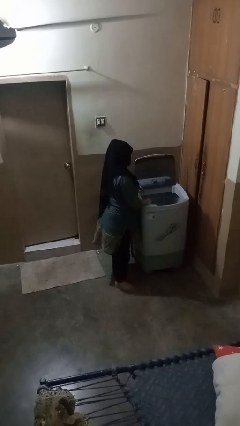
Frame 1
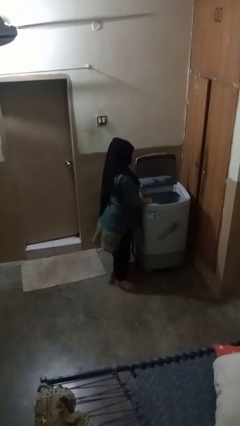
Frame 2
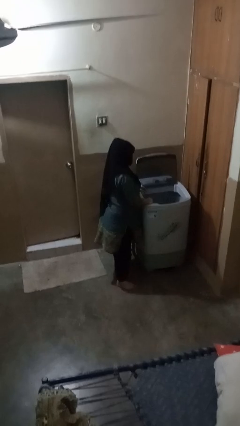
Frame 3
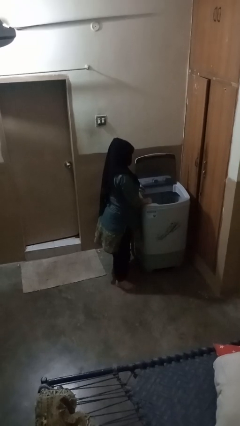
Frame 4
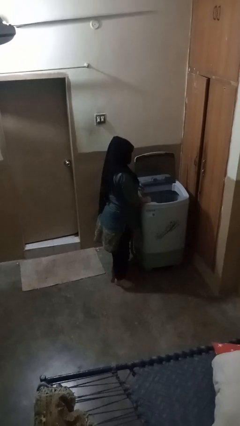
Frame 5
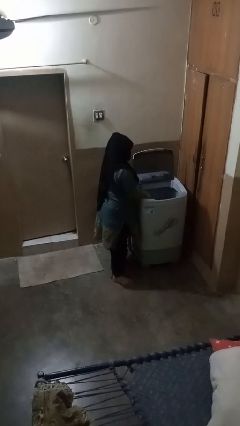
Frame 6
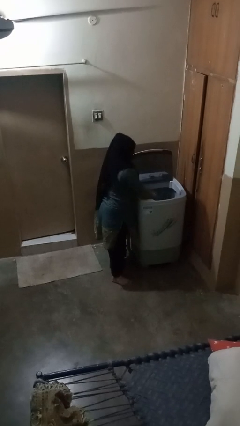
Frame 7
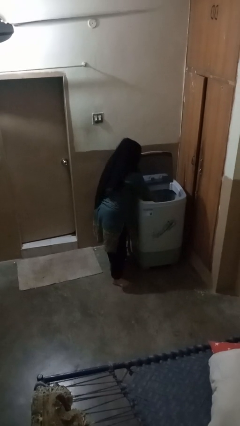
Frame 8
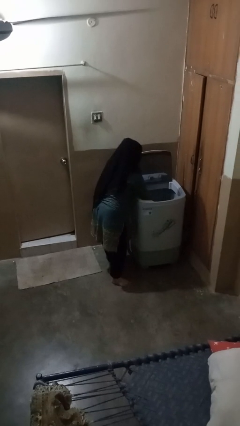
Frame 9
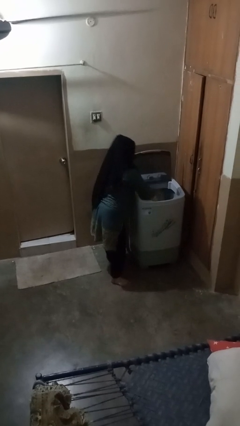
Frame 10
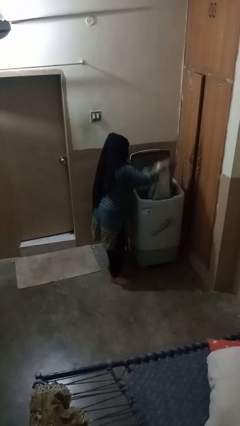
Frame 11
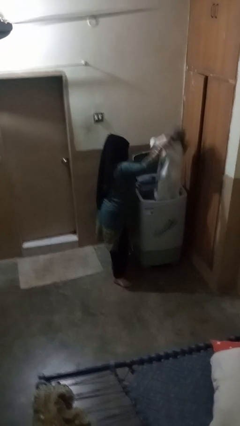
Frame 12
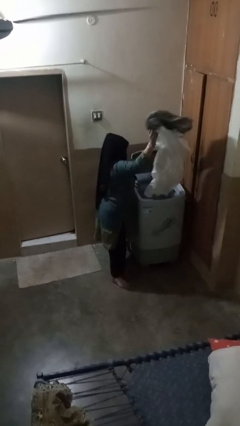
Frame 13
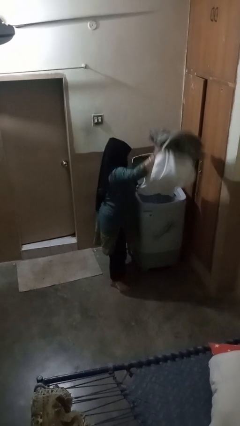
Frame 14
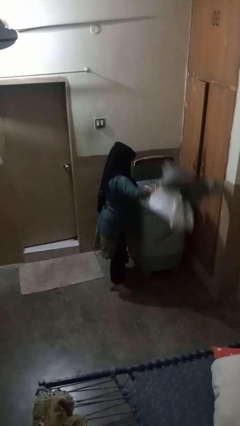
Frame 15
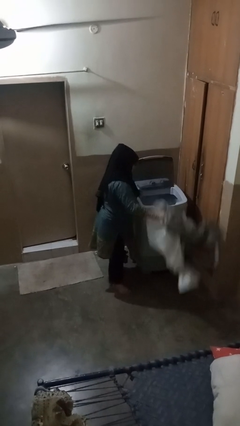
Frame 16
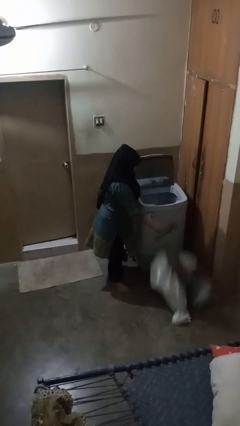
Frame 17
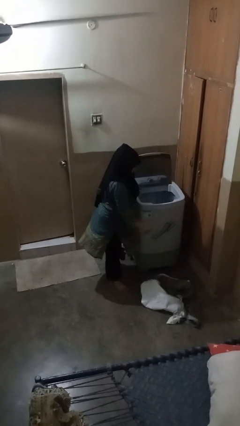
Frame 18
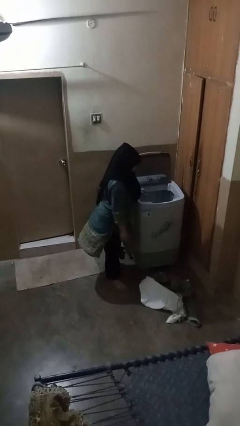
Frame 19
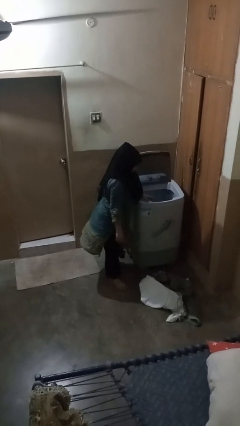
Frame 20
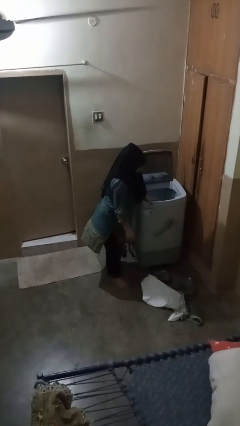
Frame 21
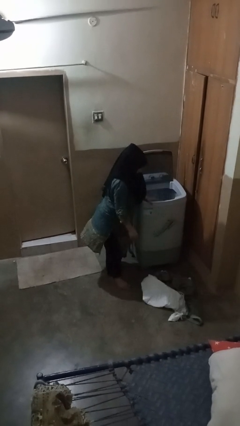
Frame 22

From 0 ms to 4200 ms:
person unloads clotheswasher

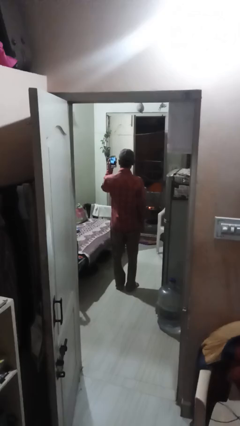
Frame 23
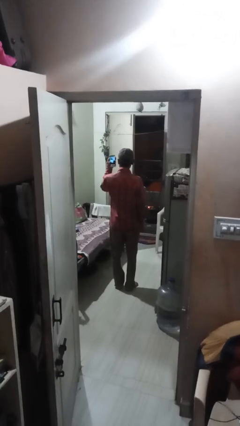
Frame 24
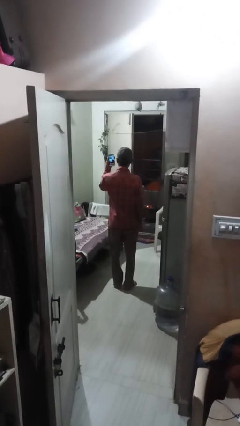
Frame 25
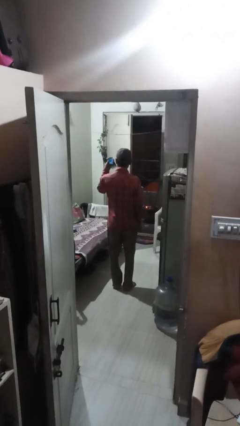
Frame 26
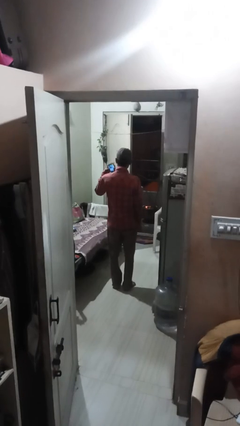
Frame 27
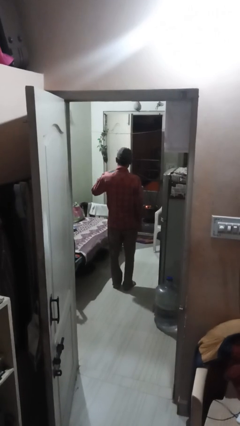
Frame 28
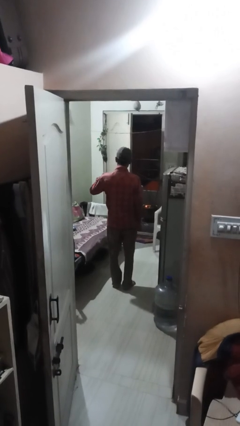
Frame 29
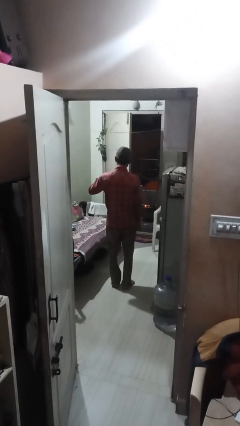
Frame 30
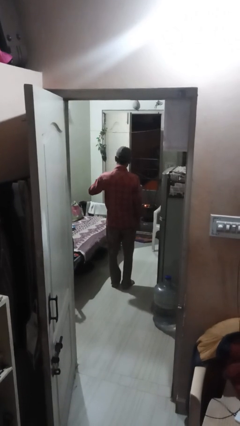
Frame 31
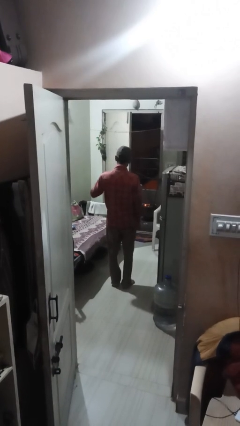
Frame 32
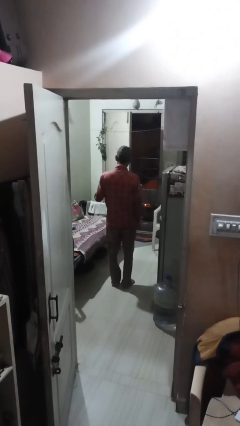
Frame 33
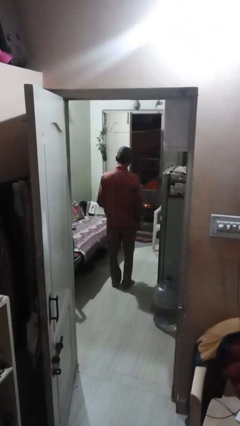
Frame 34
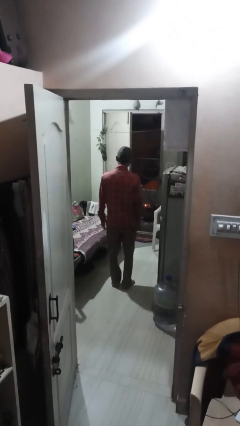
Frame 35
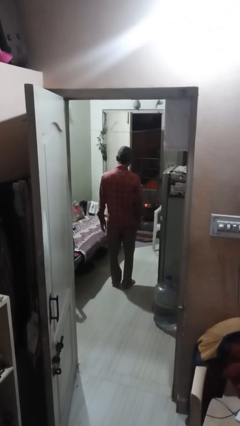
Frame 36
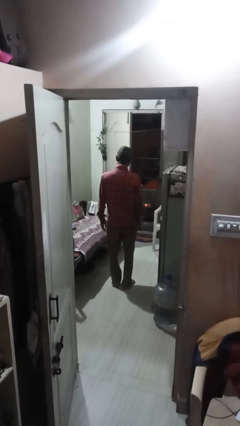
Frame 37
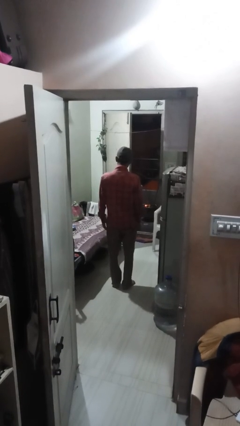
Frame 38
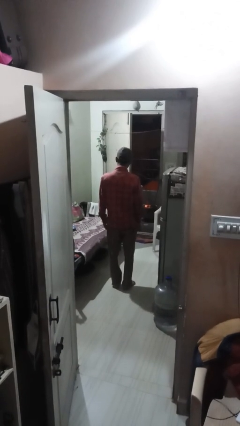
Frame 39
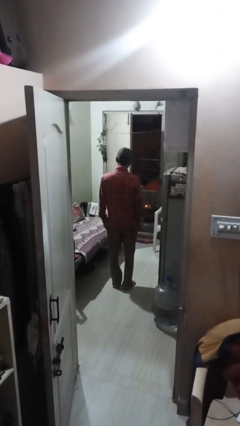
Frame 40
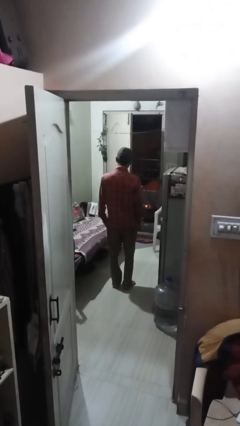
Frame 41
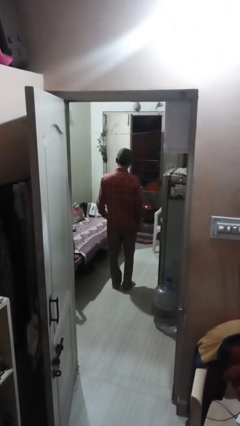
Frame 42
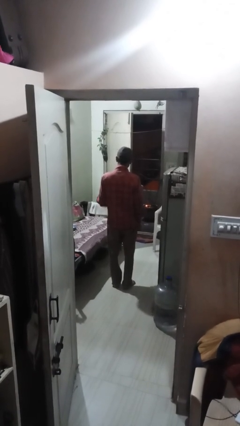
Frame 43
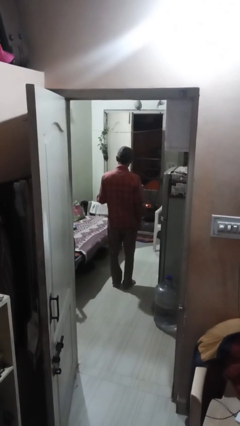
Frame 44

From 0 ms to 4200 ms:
person puts phone into pocket

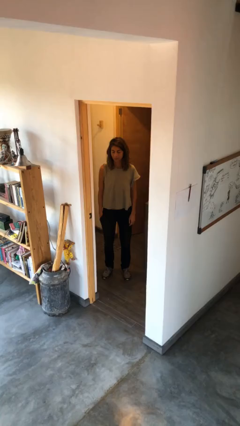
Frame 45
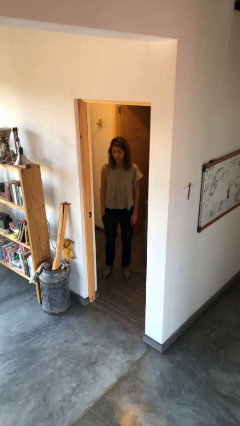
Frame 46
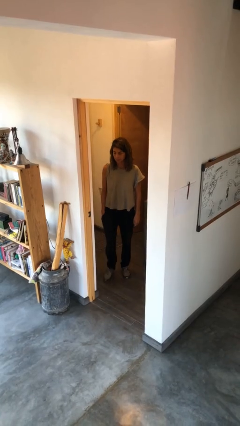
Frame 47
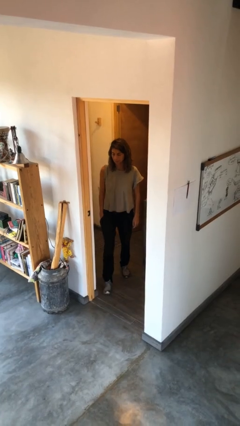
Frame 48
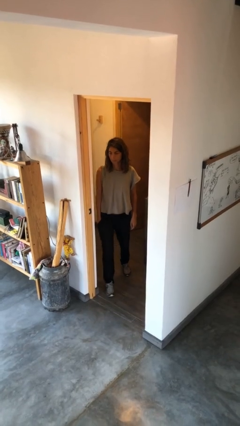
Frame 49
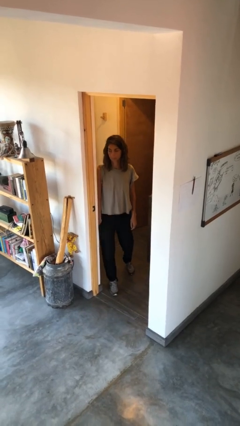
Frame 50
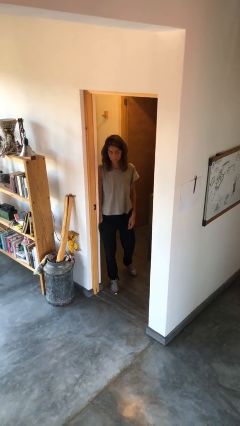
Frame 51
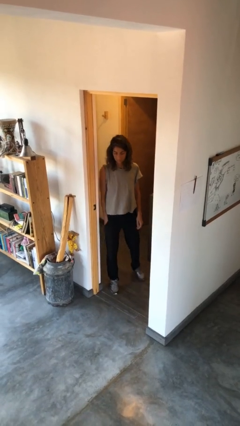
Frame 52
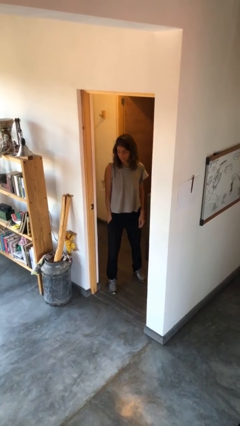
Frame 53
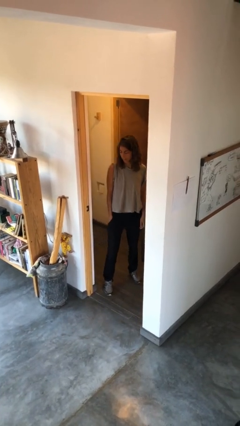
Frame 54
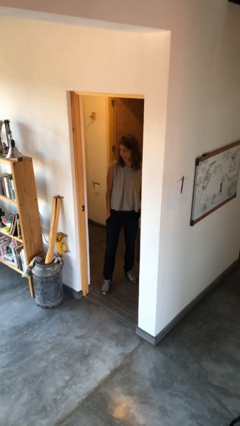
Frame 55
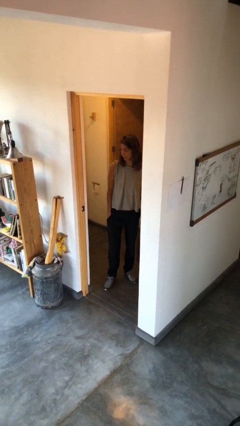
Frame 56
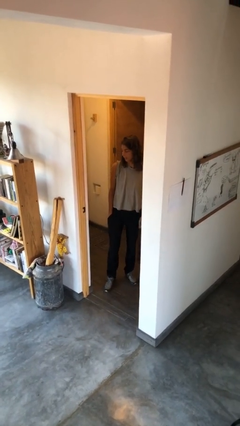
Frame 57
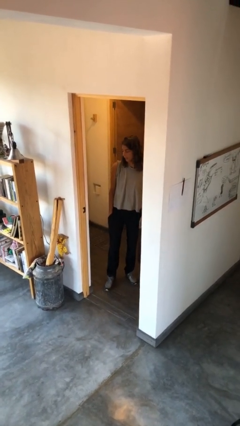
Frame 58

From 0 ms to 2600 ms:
person bumps into wall

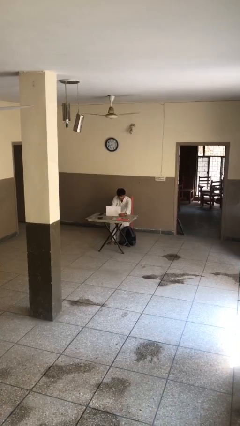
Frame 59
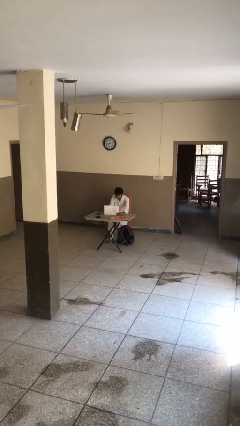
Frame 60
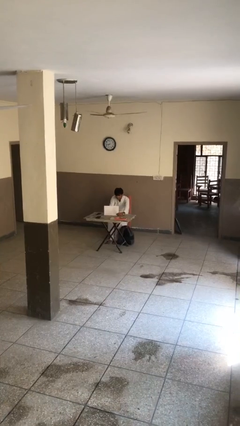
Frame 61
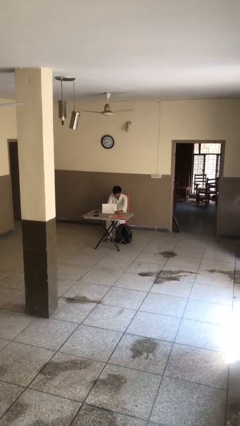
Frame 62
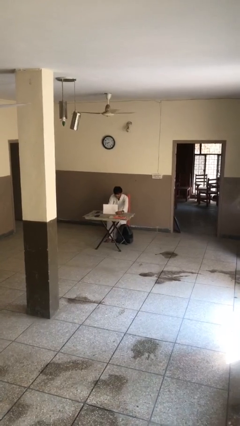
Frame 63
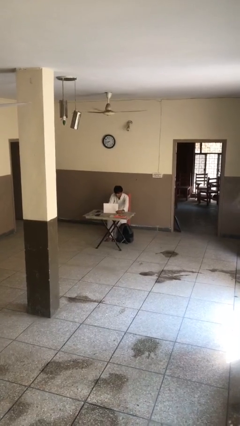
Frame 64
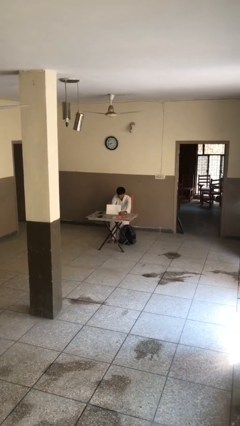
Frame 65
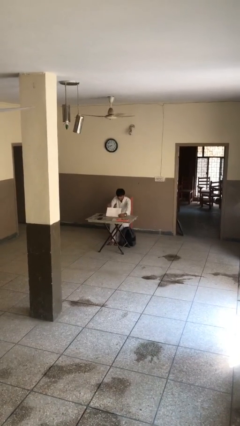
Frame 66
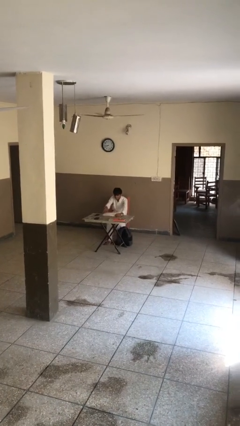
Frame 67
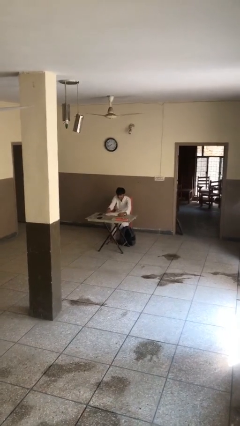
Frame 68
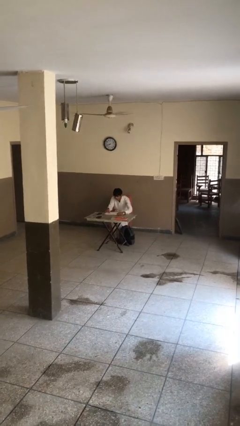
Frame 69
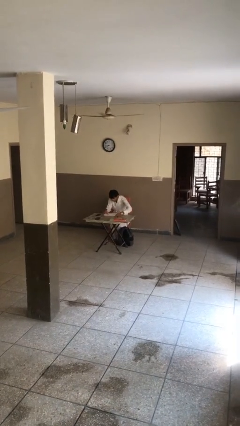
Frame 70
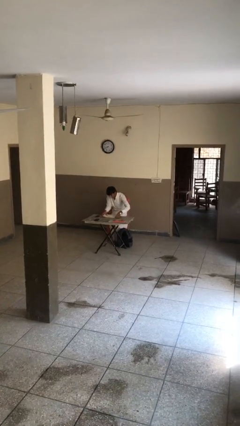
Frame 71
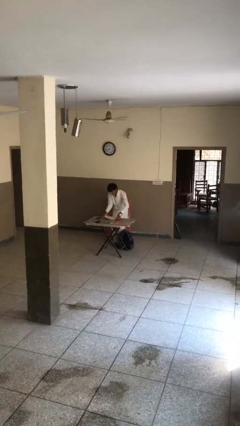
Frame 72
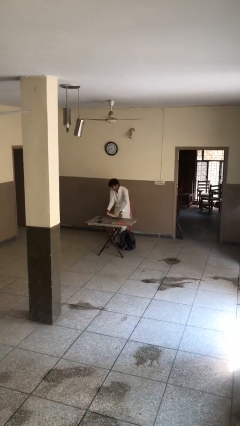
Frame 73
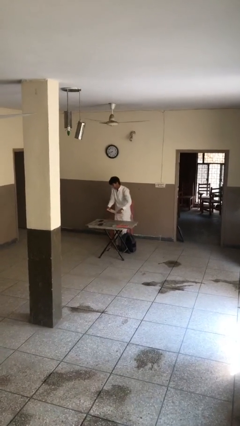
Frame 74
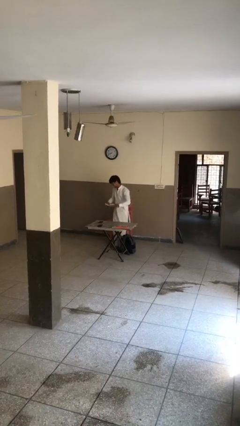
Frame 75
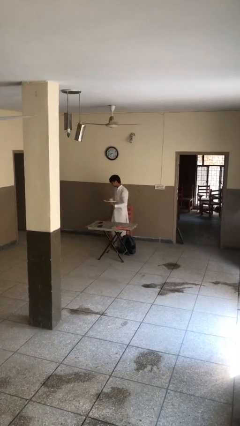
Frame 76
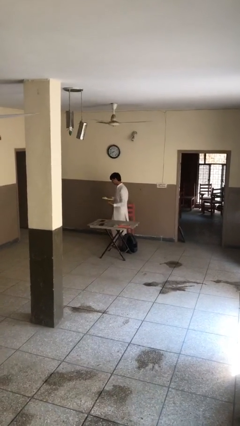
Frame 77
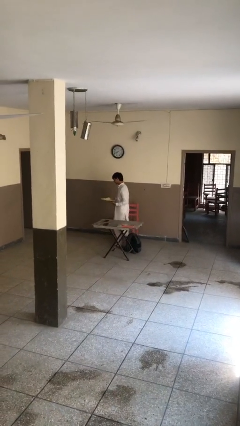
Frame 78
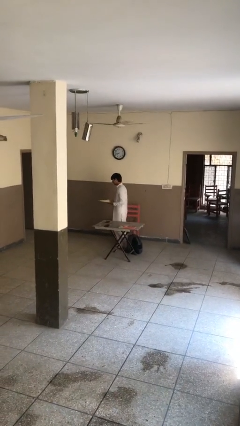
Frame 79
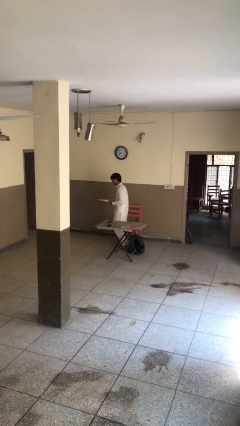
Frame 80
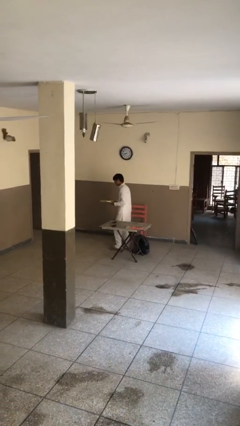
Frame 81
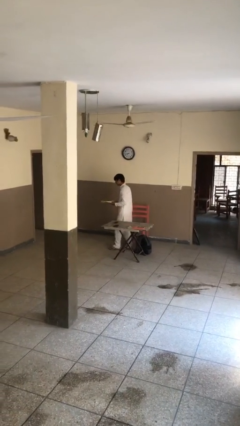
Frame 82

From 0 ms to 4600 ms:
person stands up

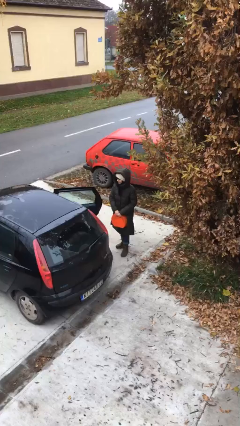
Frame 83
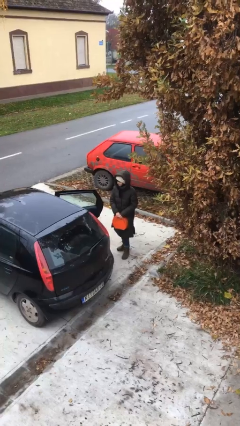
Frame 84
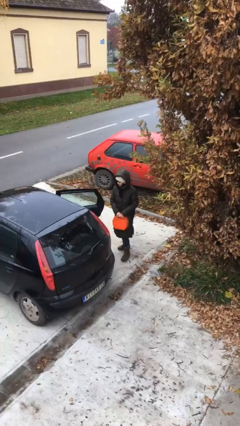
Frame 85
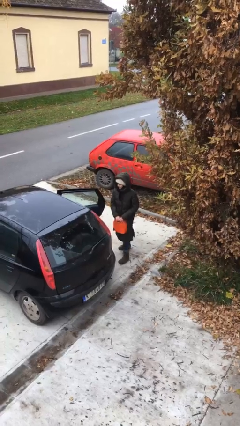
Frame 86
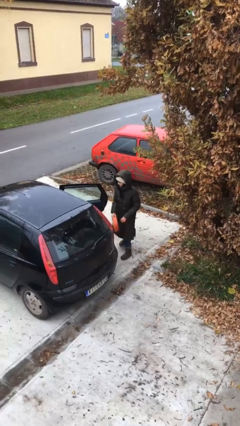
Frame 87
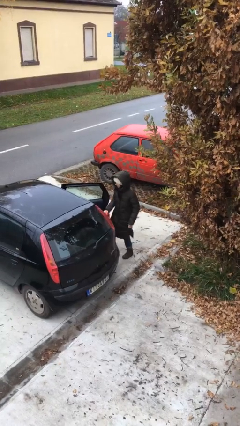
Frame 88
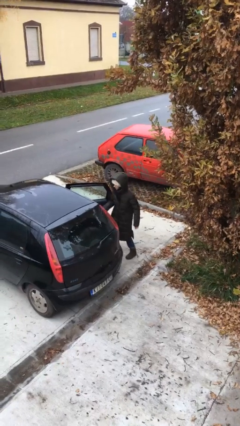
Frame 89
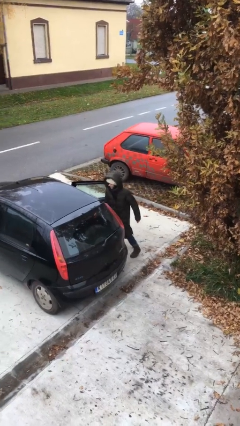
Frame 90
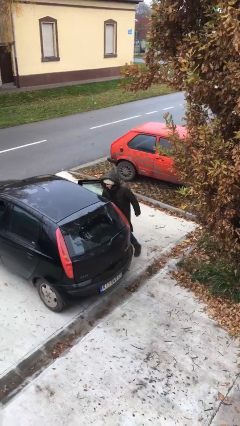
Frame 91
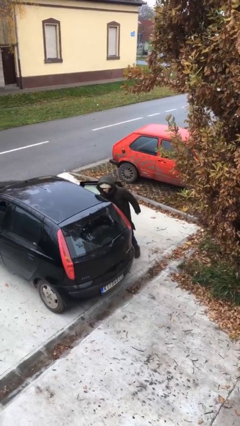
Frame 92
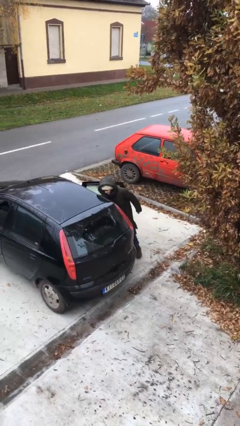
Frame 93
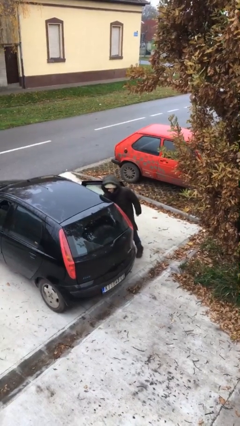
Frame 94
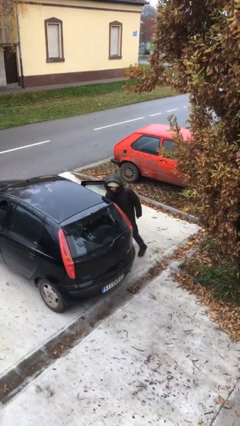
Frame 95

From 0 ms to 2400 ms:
person loads car
